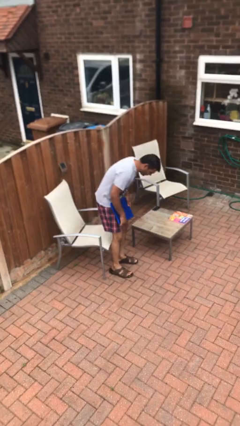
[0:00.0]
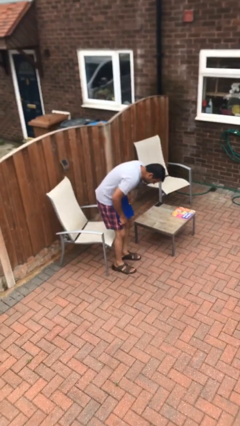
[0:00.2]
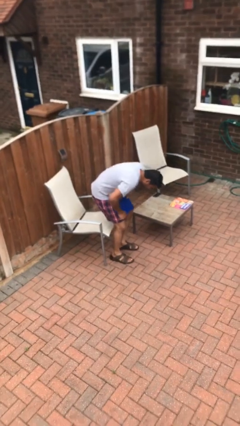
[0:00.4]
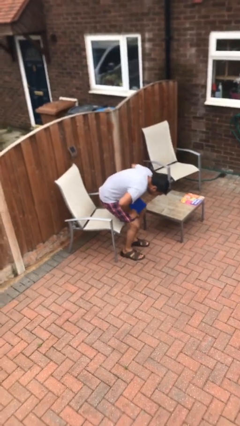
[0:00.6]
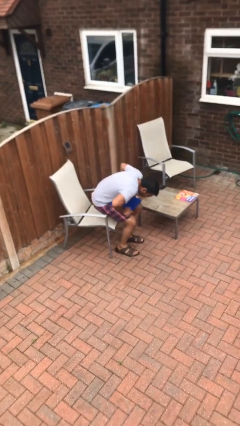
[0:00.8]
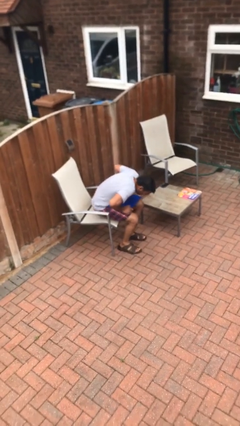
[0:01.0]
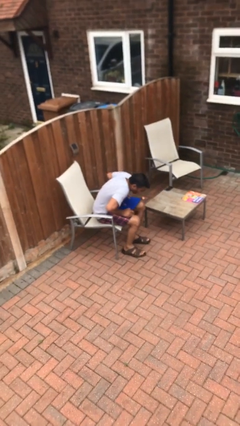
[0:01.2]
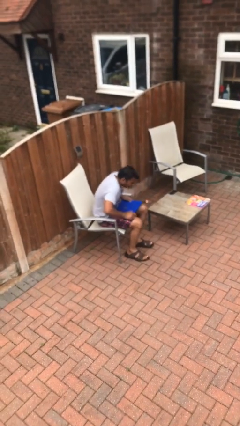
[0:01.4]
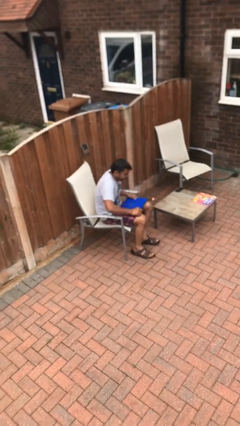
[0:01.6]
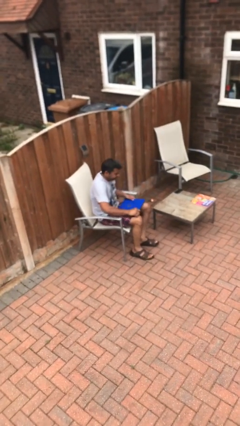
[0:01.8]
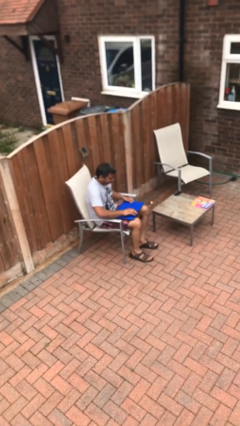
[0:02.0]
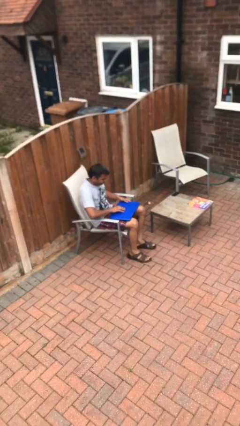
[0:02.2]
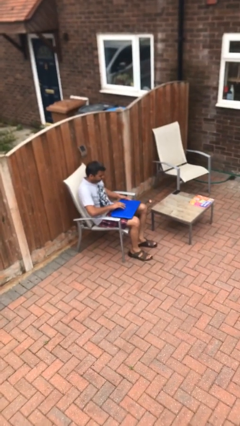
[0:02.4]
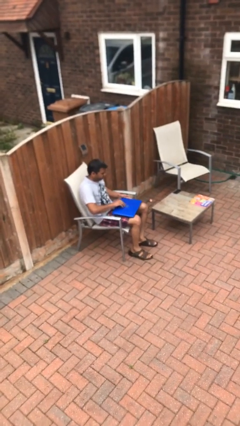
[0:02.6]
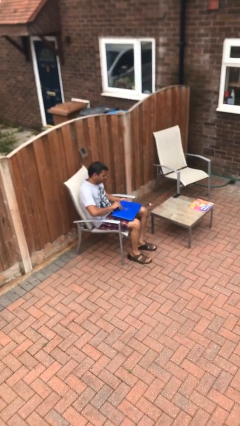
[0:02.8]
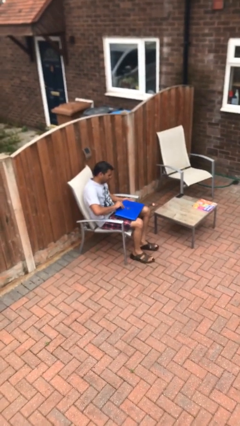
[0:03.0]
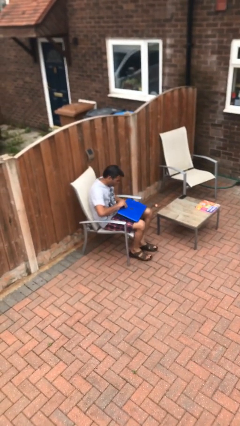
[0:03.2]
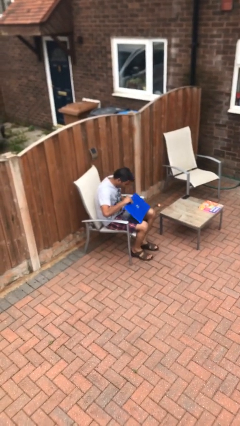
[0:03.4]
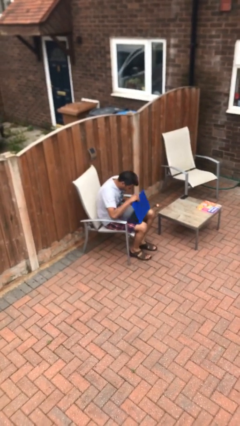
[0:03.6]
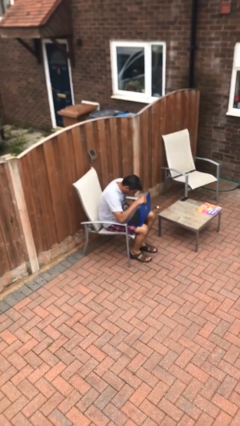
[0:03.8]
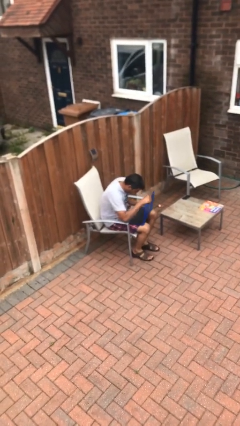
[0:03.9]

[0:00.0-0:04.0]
person sits down

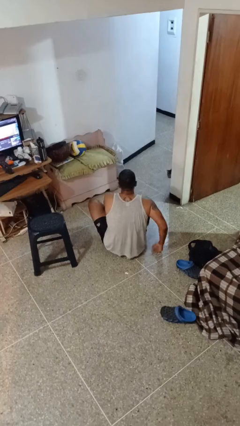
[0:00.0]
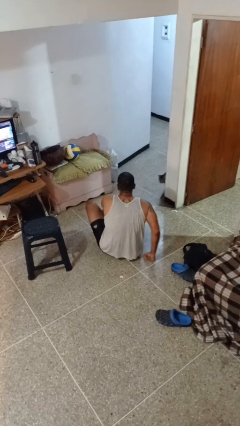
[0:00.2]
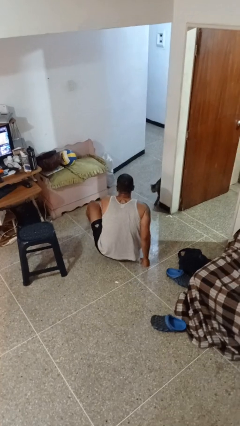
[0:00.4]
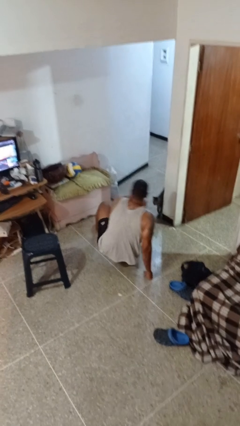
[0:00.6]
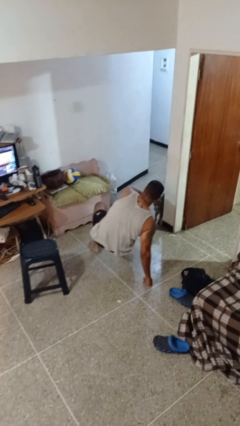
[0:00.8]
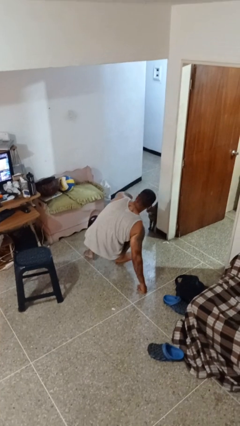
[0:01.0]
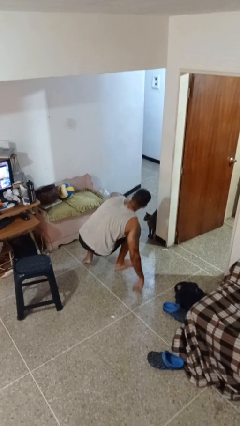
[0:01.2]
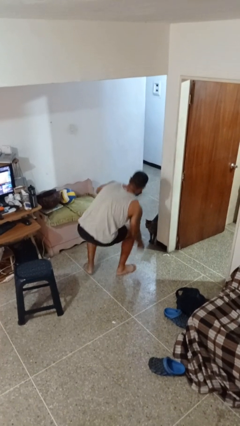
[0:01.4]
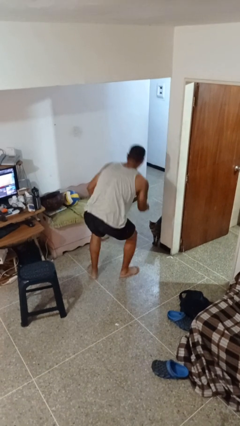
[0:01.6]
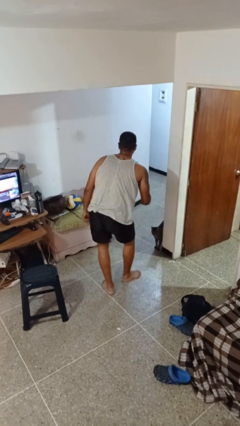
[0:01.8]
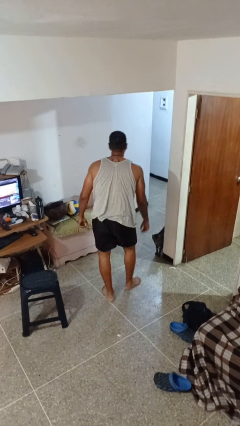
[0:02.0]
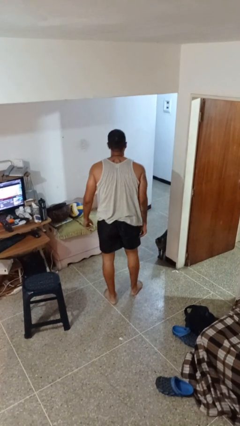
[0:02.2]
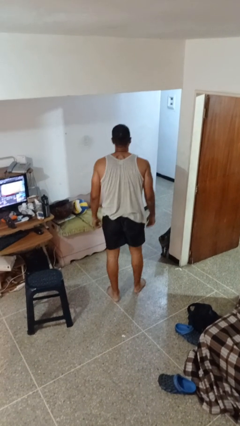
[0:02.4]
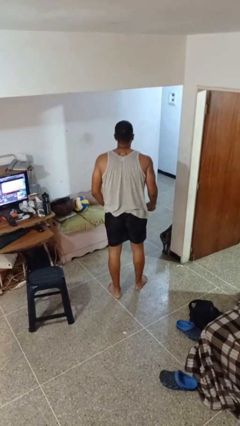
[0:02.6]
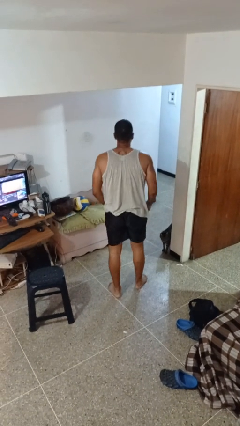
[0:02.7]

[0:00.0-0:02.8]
person stands up from floor

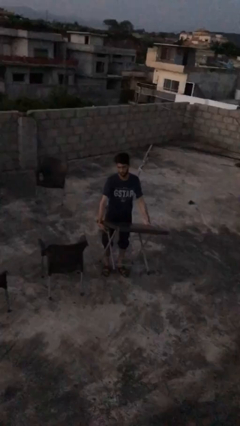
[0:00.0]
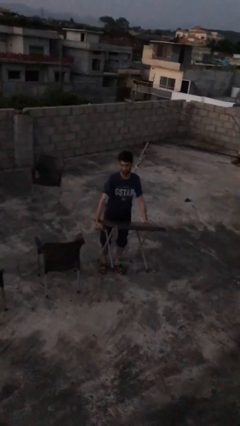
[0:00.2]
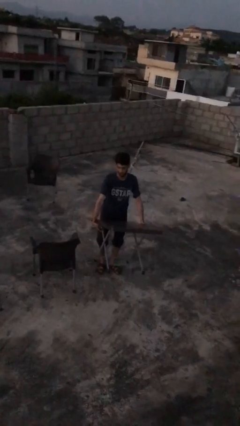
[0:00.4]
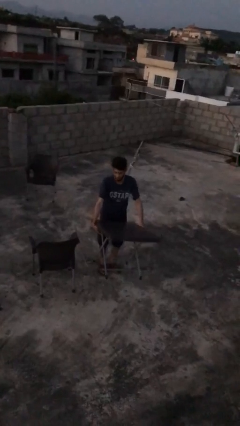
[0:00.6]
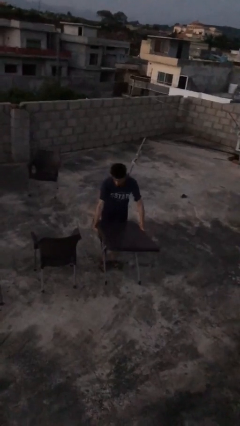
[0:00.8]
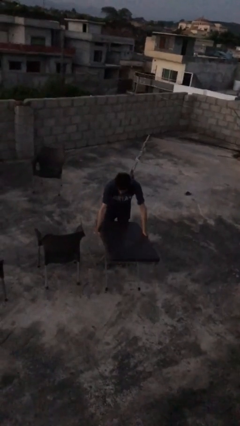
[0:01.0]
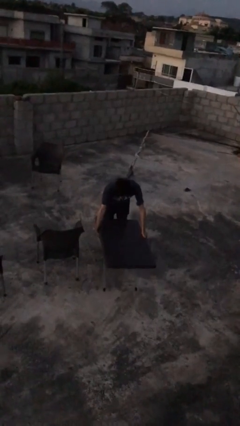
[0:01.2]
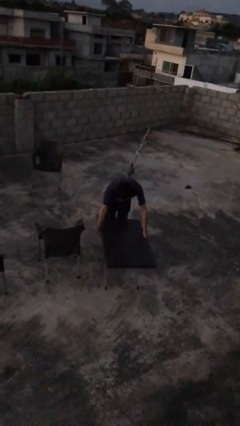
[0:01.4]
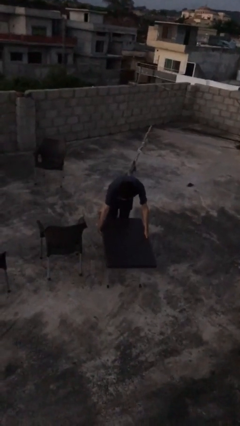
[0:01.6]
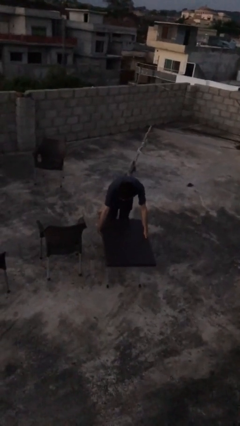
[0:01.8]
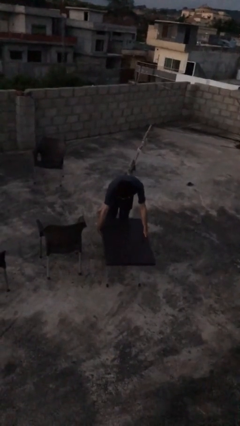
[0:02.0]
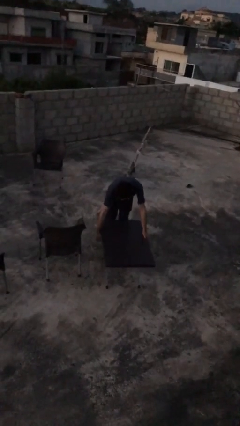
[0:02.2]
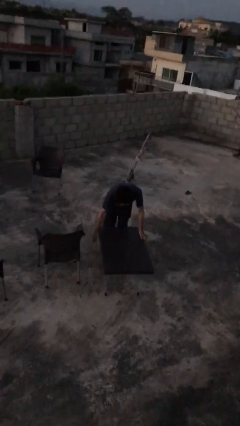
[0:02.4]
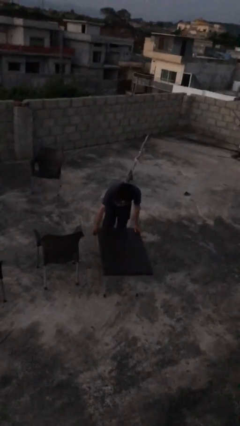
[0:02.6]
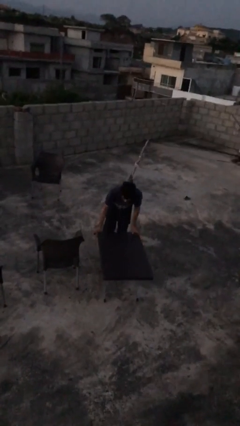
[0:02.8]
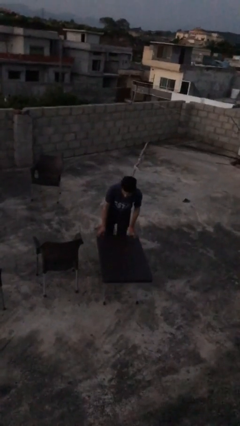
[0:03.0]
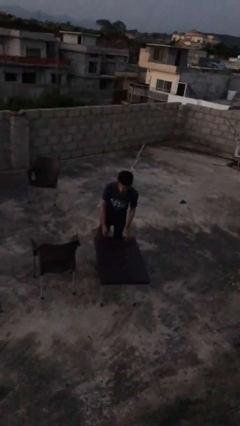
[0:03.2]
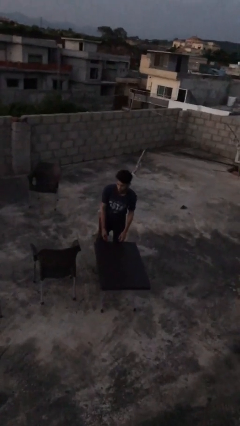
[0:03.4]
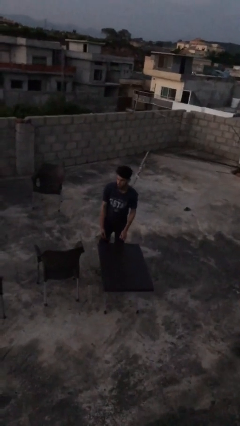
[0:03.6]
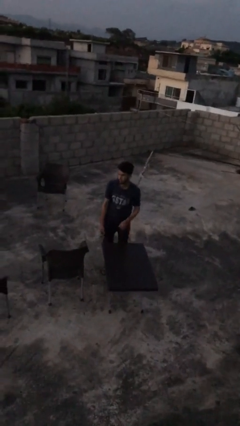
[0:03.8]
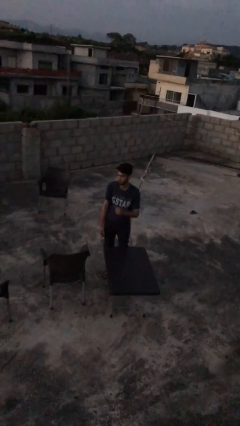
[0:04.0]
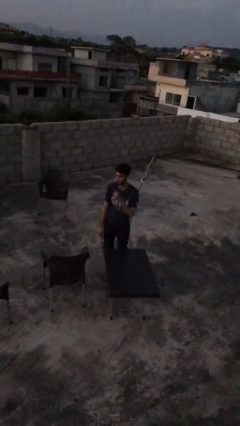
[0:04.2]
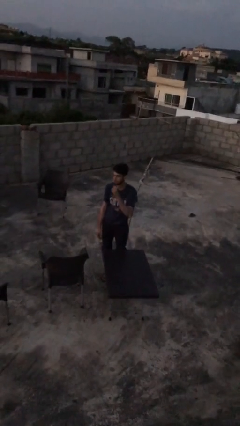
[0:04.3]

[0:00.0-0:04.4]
person puts down object on floor

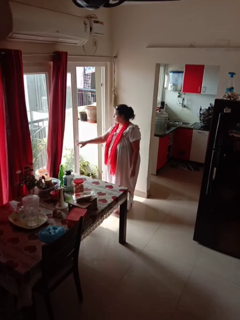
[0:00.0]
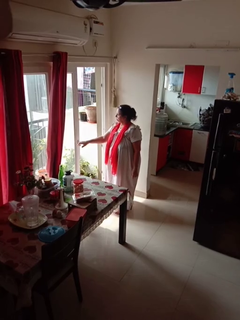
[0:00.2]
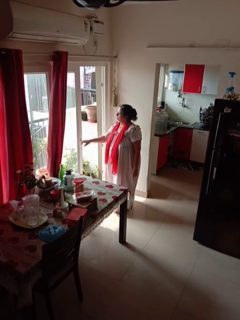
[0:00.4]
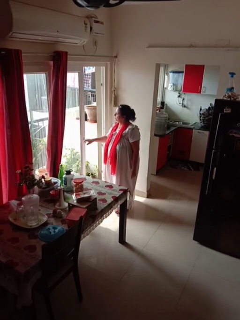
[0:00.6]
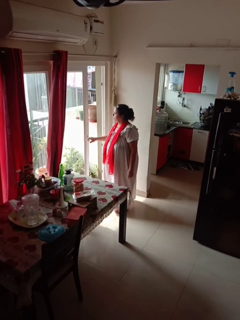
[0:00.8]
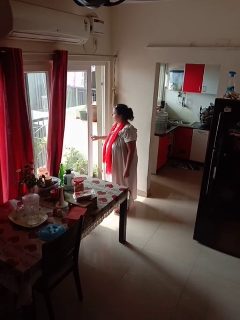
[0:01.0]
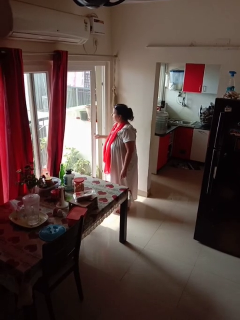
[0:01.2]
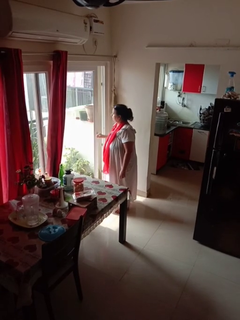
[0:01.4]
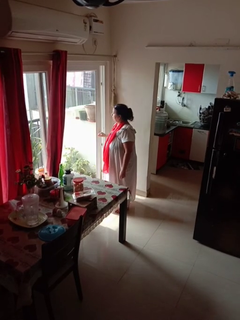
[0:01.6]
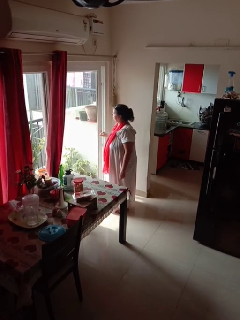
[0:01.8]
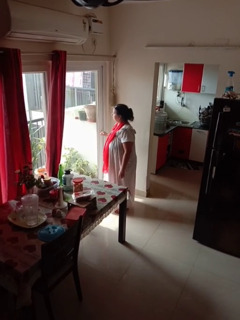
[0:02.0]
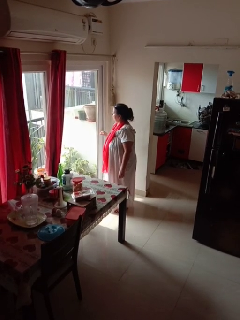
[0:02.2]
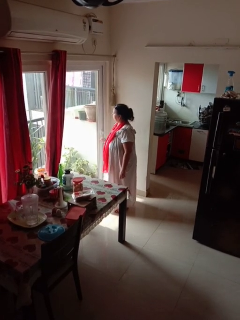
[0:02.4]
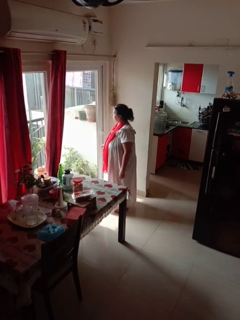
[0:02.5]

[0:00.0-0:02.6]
person closes sliding door

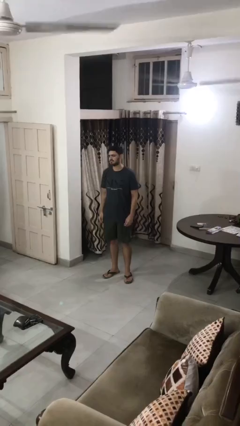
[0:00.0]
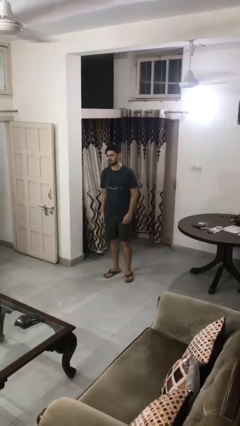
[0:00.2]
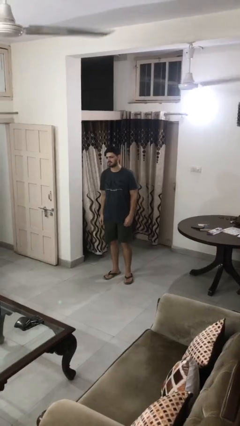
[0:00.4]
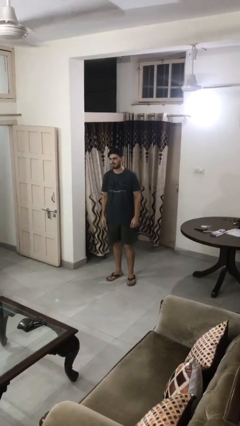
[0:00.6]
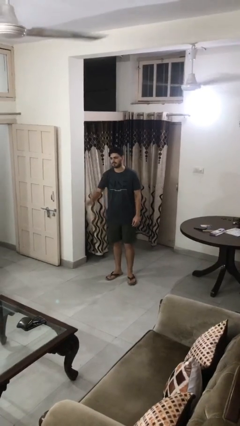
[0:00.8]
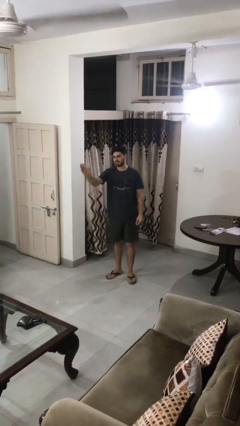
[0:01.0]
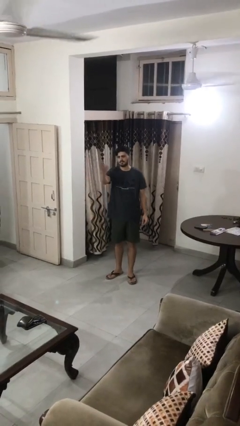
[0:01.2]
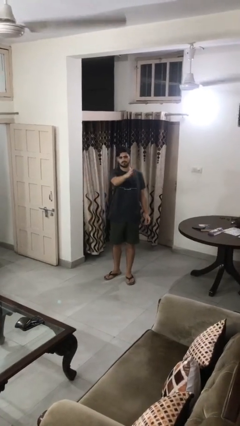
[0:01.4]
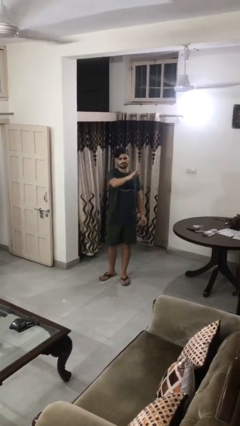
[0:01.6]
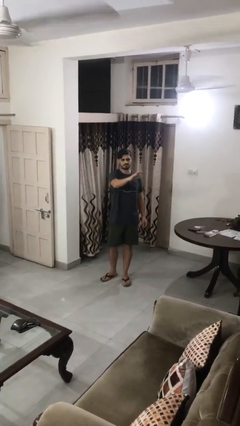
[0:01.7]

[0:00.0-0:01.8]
person gestures swipe left

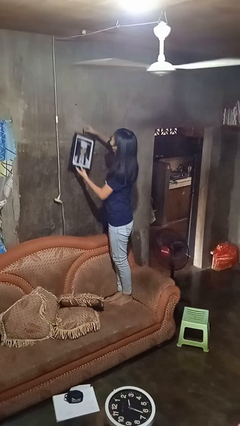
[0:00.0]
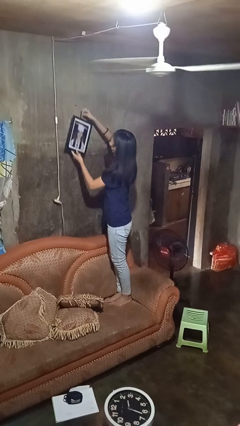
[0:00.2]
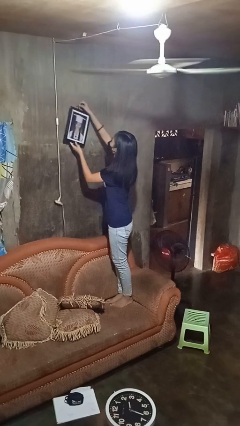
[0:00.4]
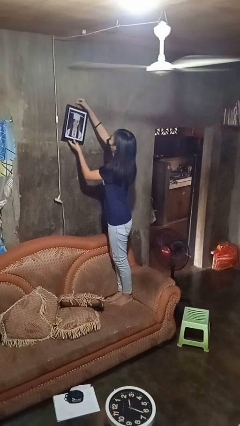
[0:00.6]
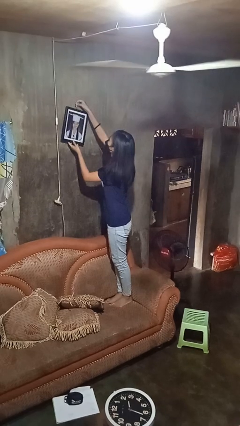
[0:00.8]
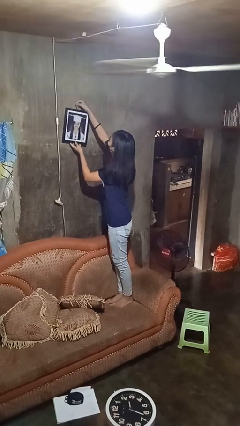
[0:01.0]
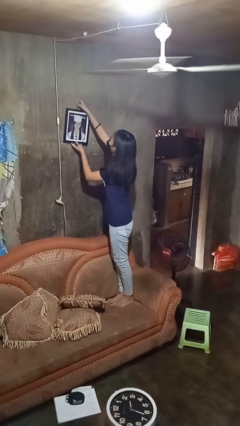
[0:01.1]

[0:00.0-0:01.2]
person puts up picture frame

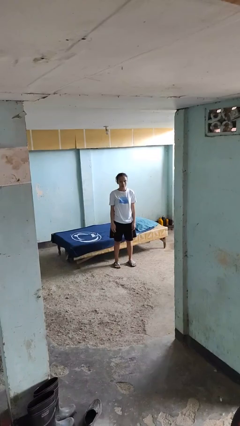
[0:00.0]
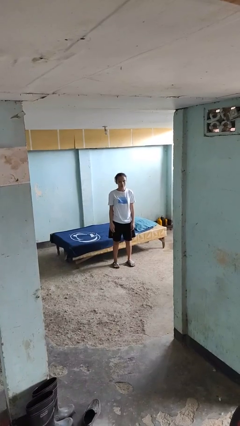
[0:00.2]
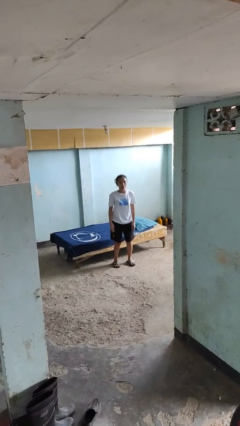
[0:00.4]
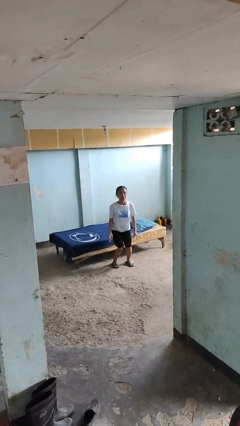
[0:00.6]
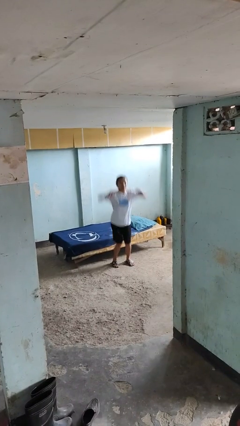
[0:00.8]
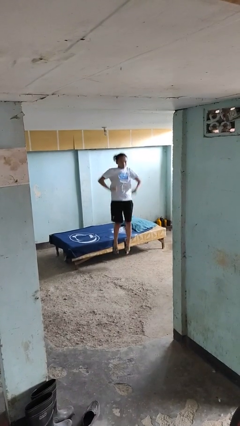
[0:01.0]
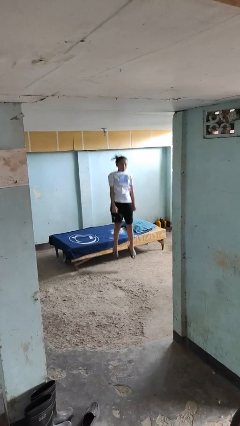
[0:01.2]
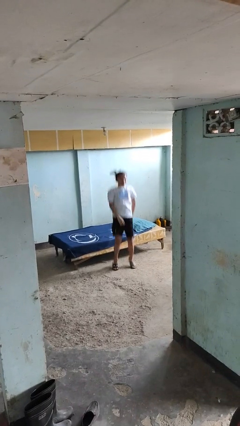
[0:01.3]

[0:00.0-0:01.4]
person jumps
